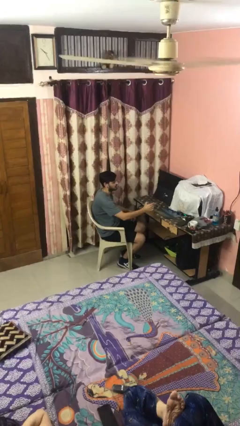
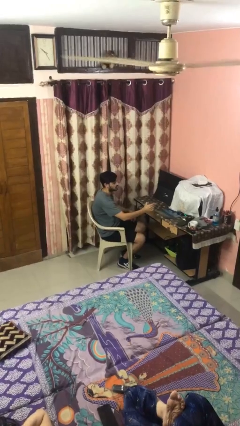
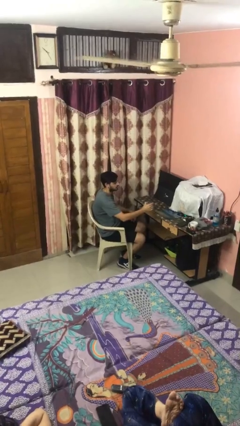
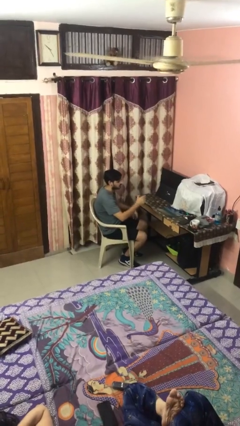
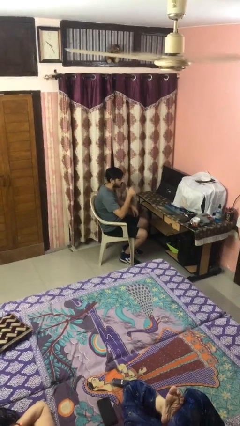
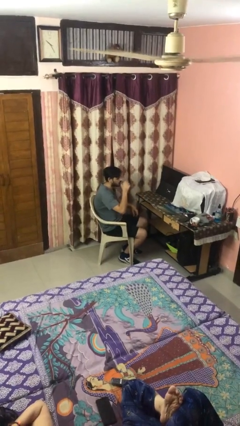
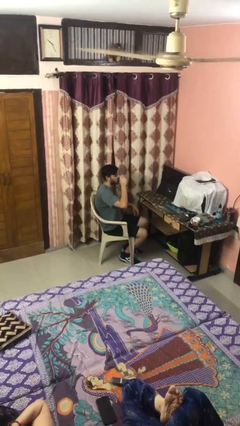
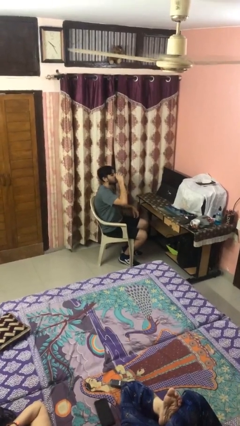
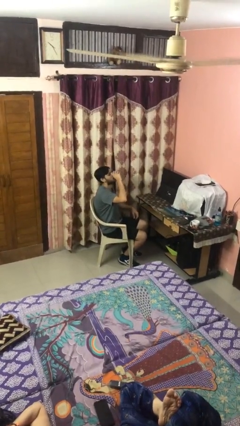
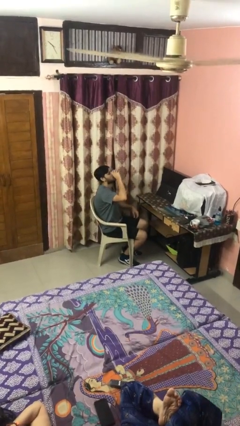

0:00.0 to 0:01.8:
person drinks from shotglass

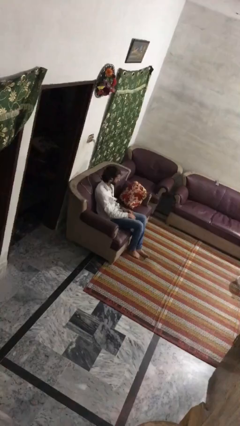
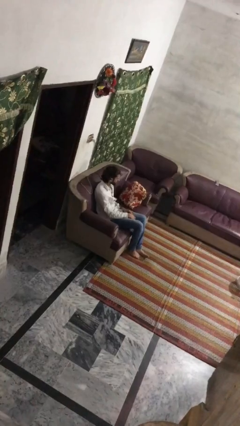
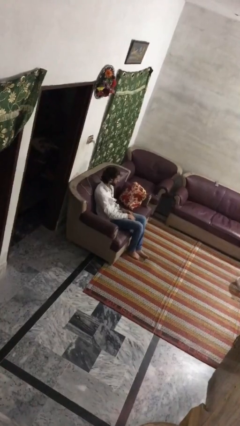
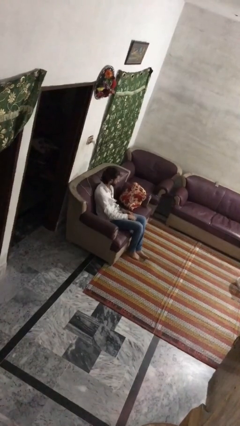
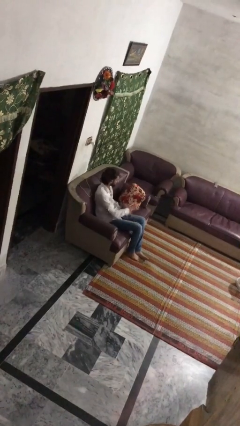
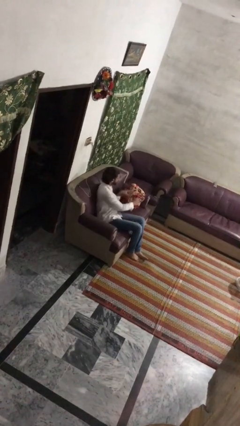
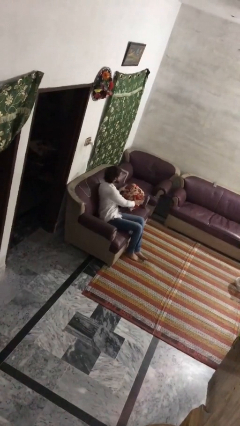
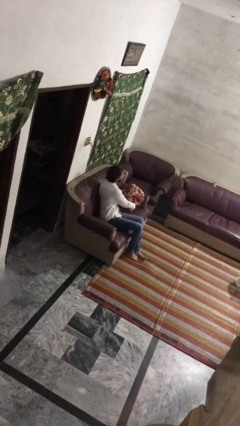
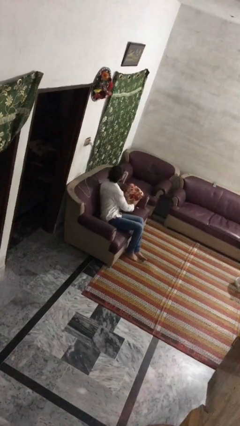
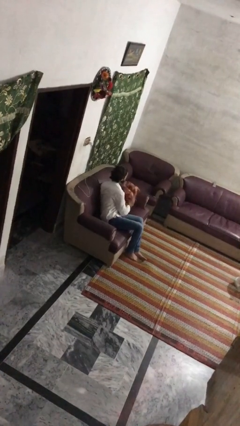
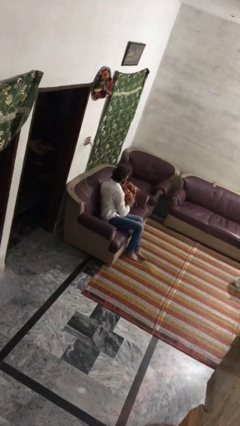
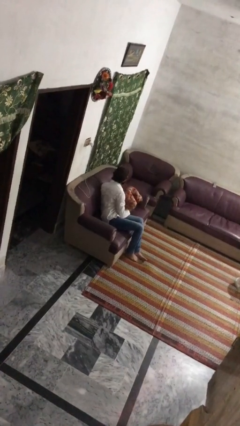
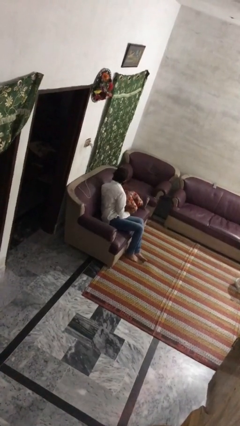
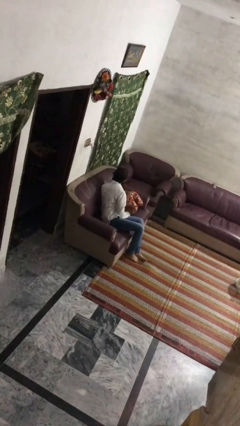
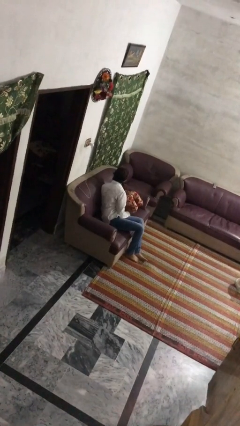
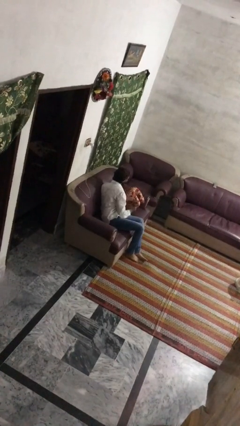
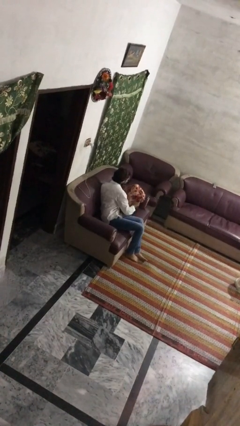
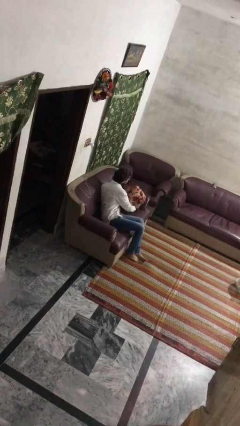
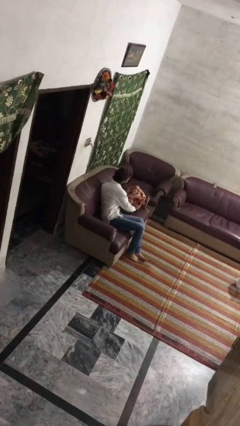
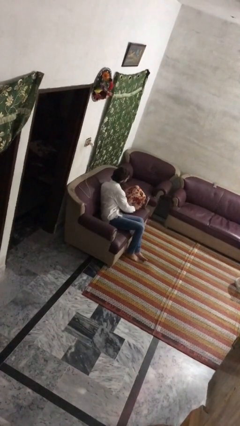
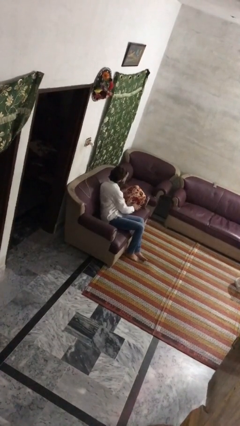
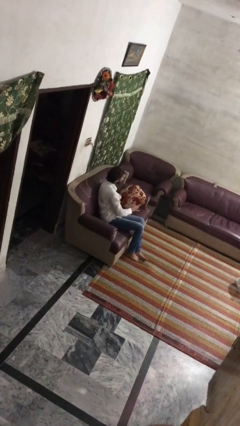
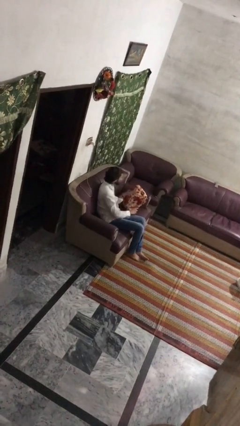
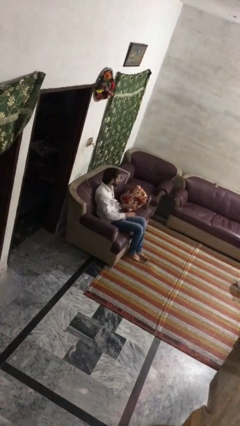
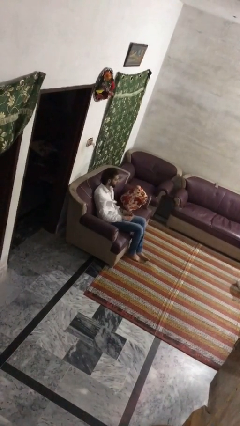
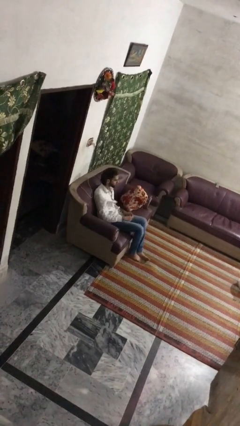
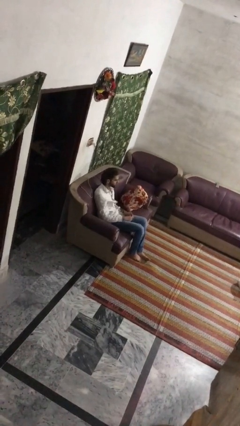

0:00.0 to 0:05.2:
person searches in couch

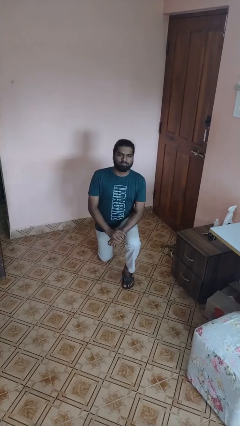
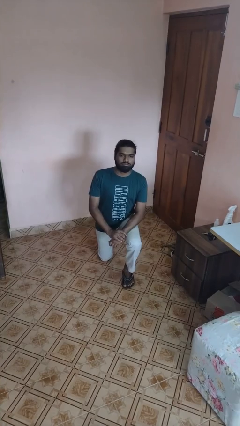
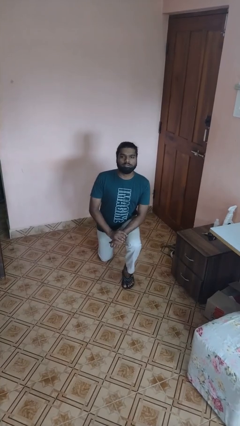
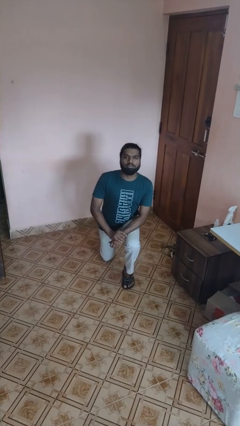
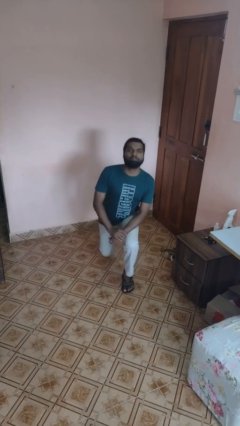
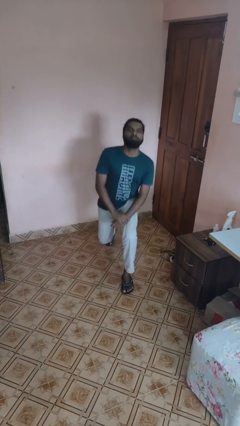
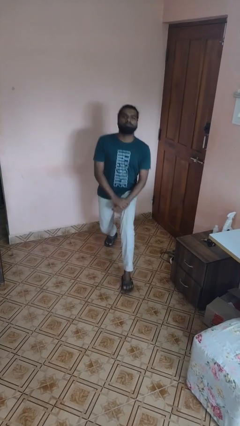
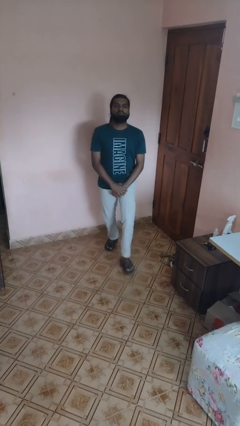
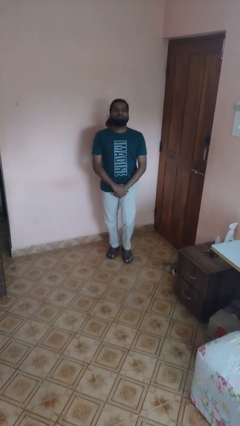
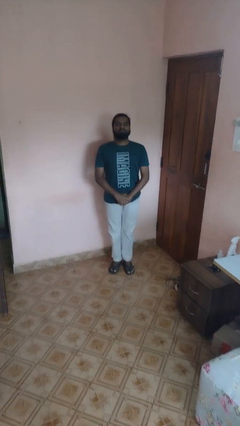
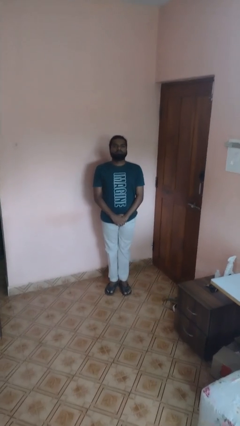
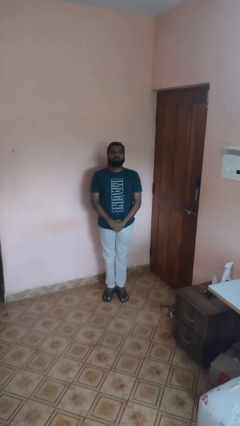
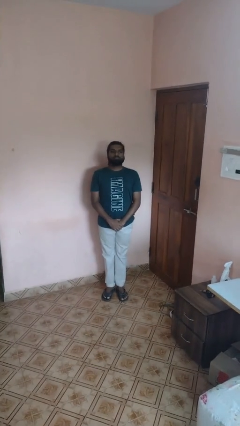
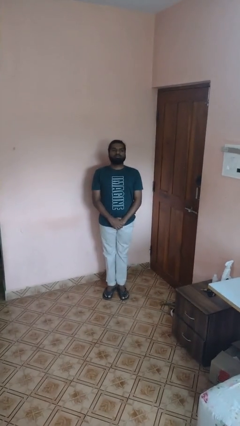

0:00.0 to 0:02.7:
person stands up from floor

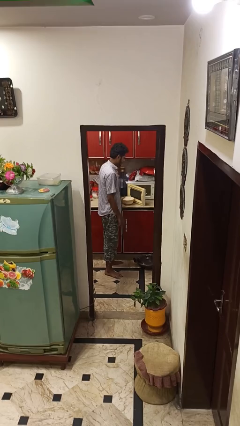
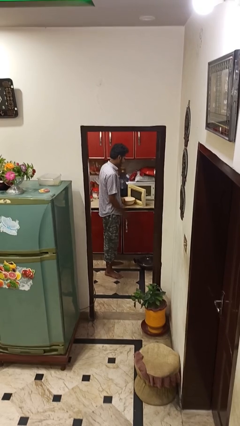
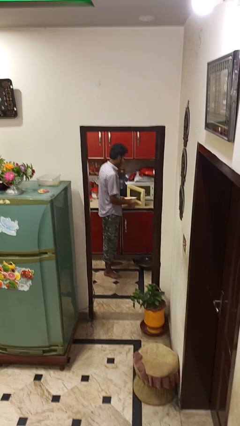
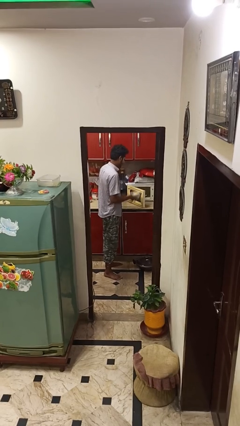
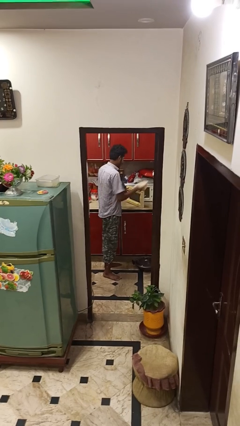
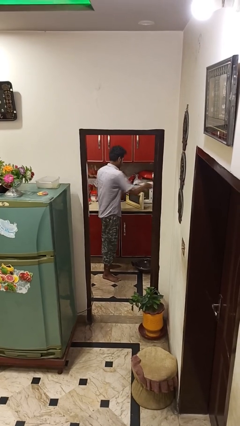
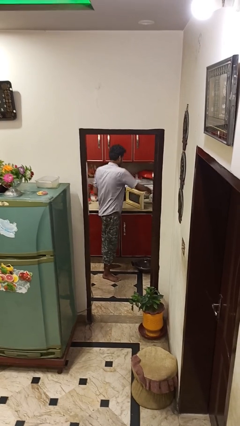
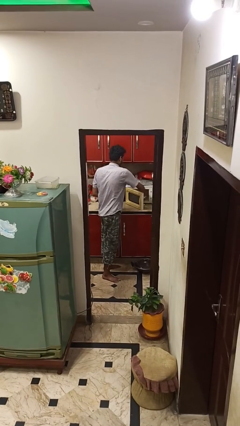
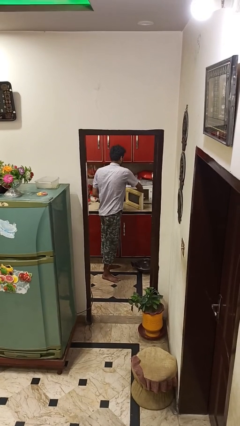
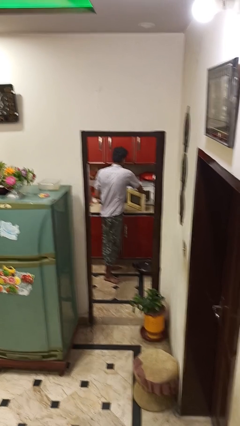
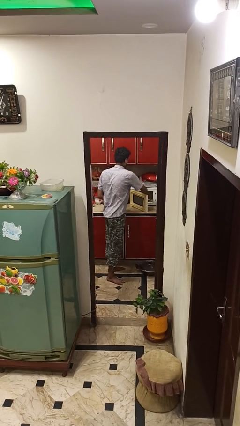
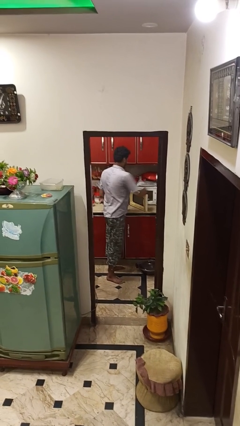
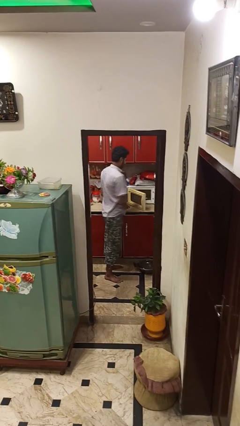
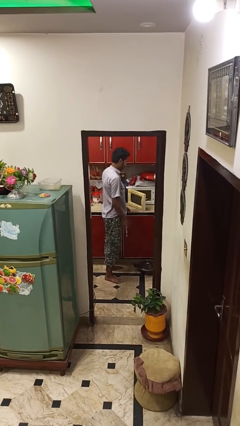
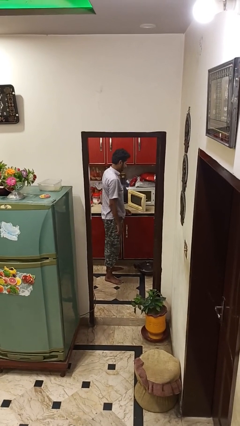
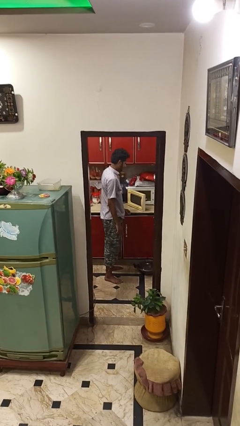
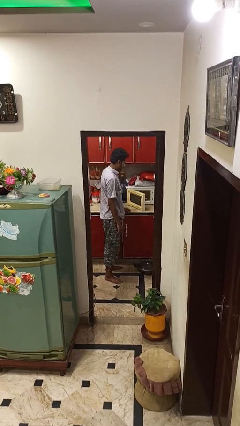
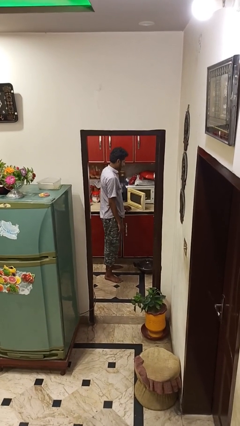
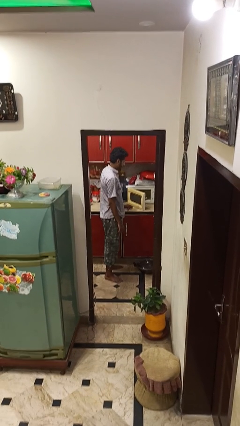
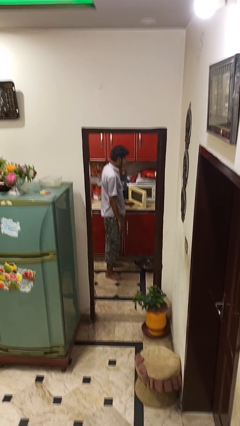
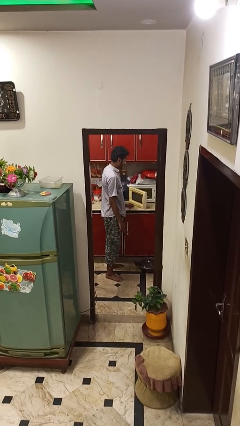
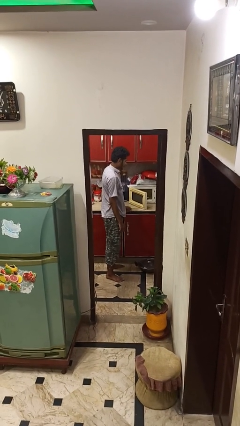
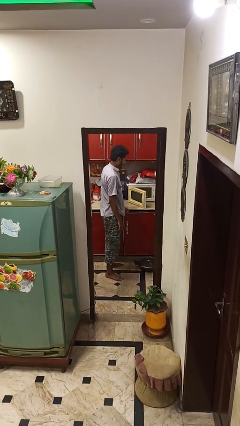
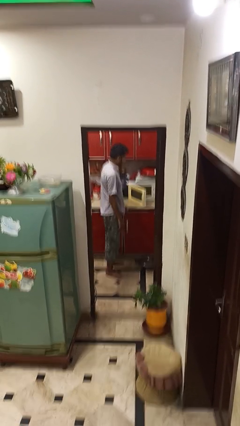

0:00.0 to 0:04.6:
person puts object into microwave

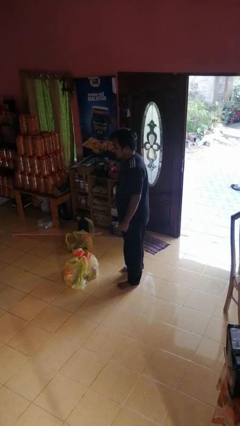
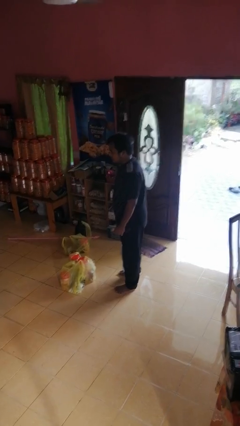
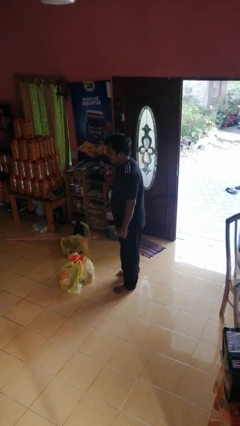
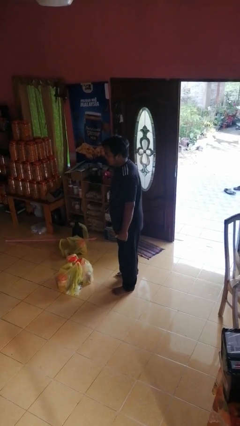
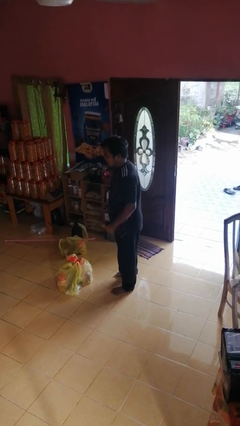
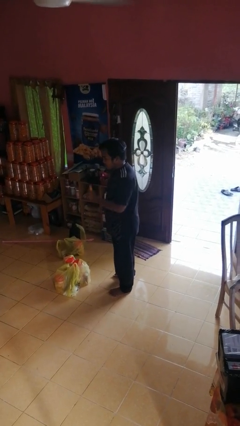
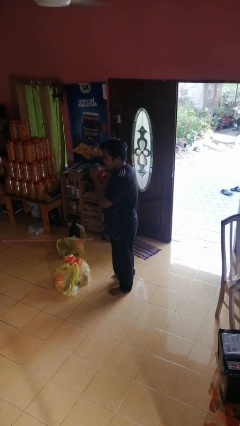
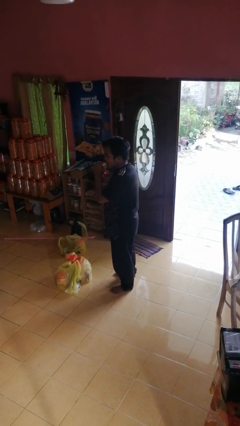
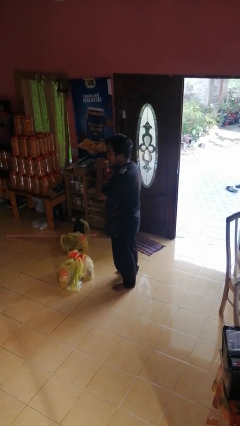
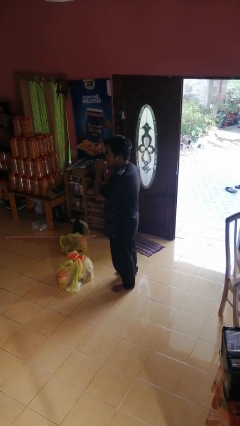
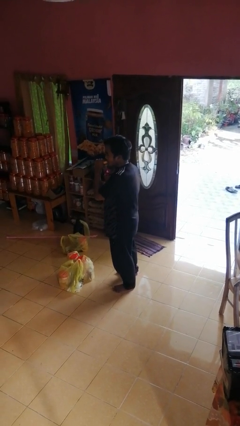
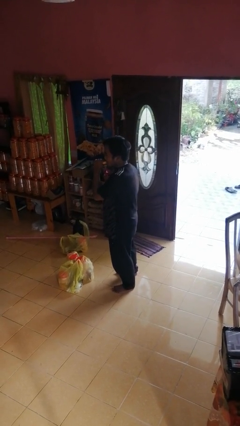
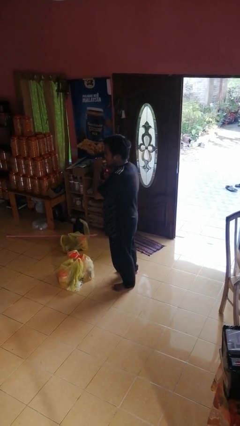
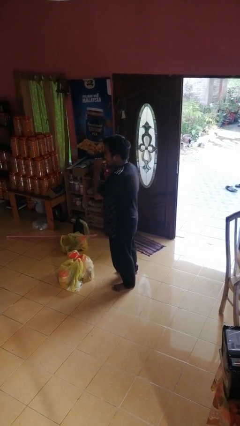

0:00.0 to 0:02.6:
person eats banana

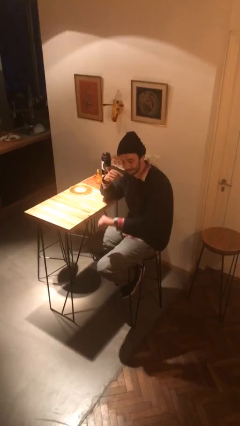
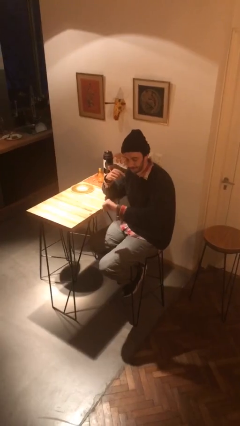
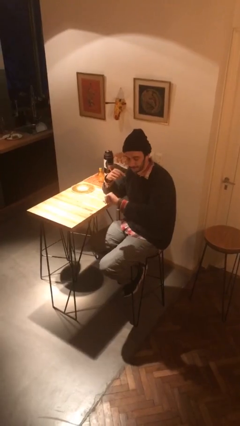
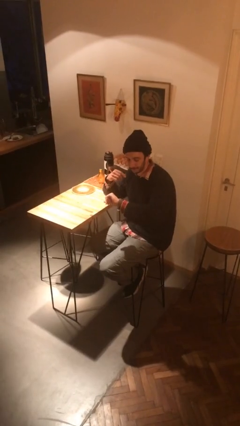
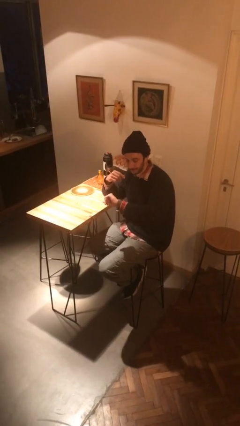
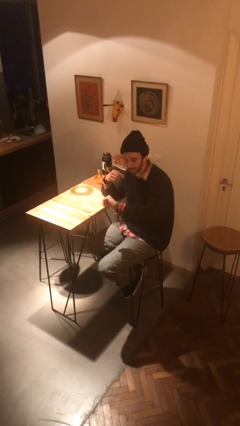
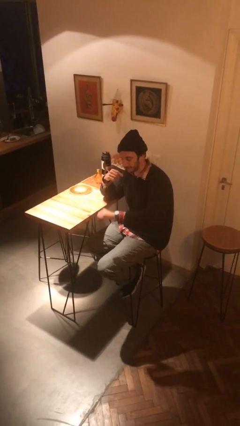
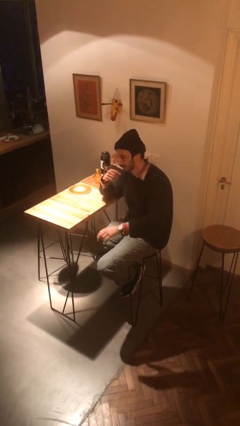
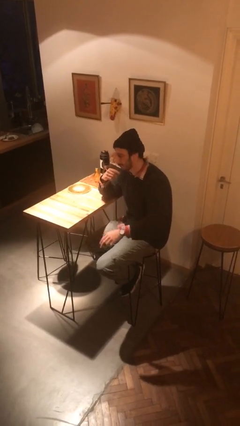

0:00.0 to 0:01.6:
person looks at wristwatch
